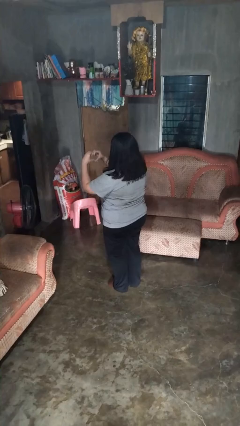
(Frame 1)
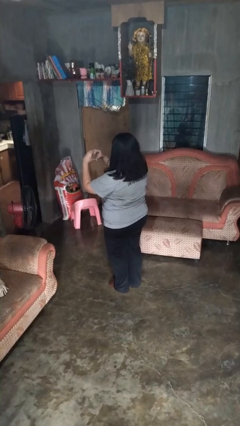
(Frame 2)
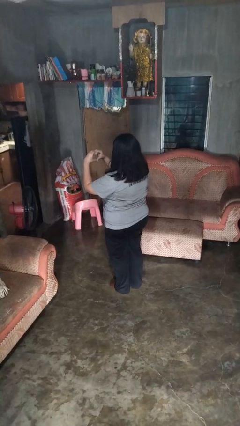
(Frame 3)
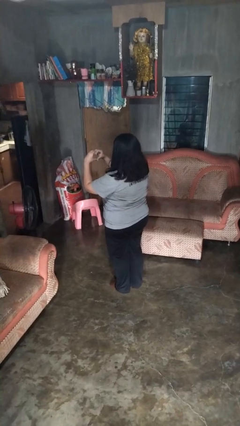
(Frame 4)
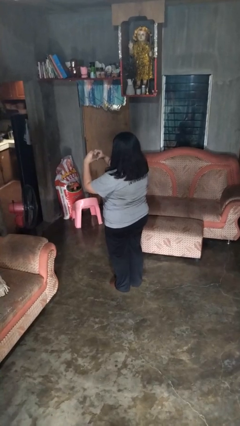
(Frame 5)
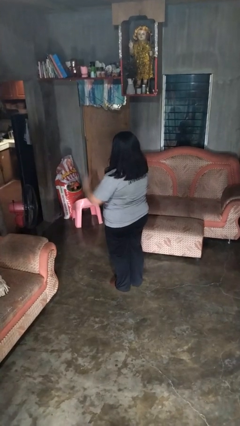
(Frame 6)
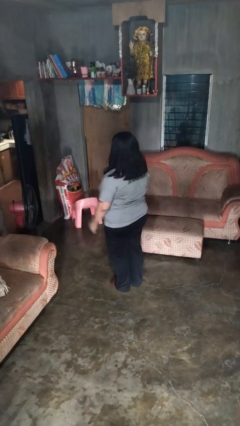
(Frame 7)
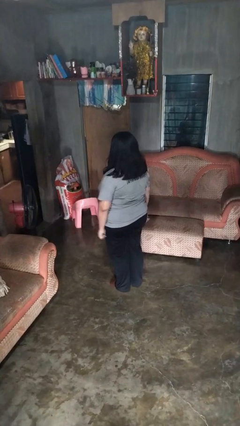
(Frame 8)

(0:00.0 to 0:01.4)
person gestures heart

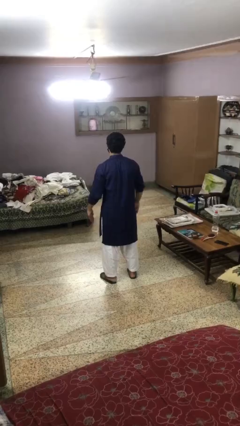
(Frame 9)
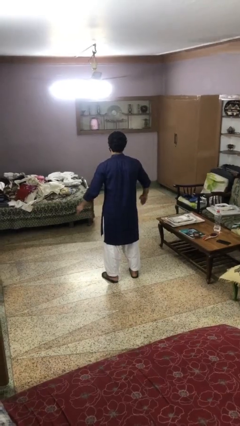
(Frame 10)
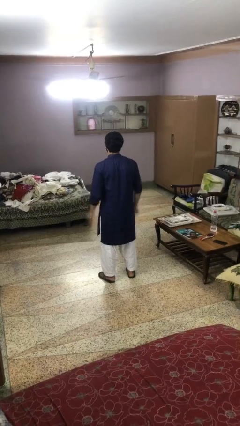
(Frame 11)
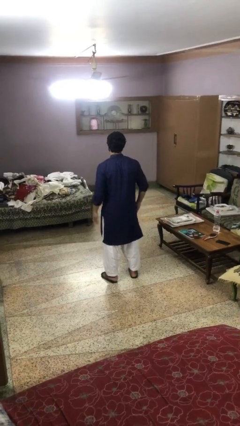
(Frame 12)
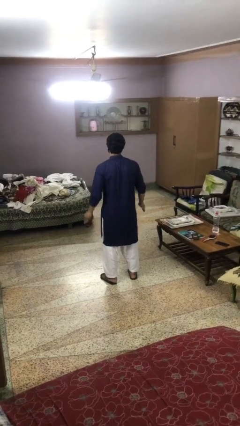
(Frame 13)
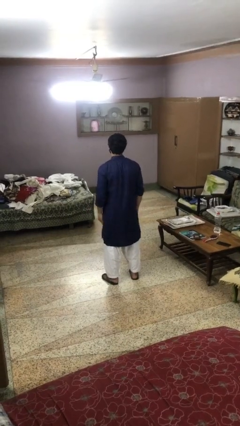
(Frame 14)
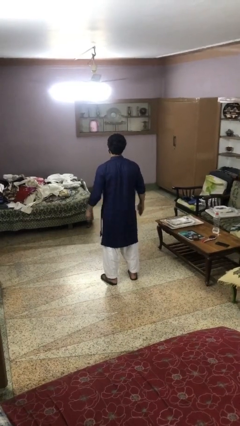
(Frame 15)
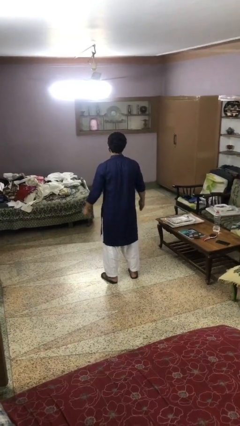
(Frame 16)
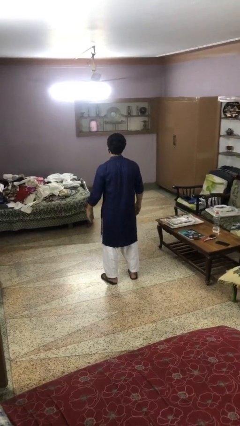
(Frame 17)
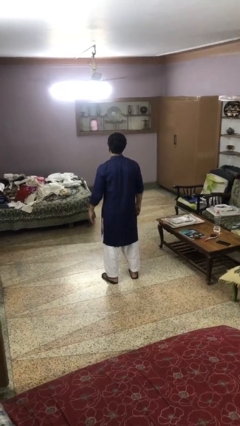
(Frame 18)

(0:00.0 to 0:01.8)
person slaps hands on thighs

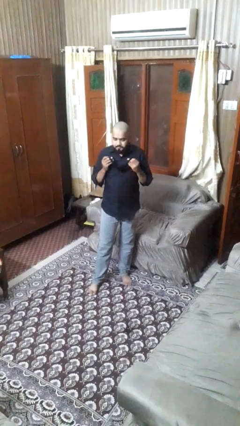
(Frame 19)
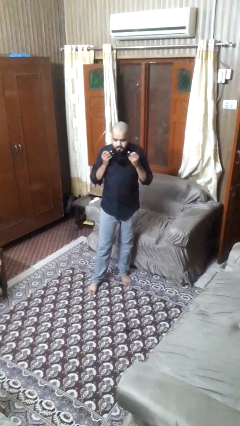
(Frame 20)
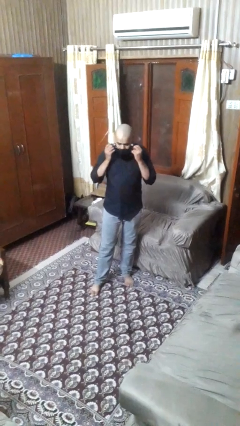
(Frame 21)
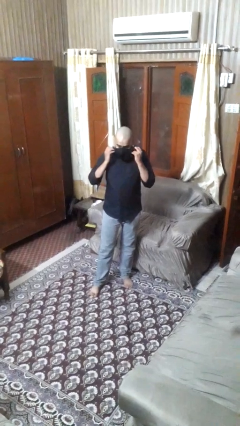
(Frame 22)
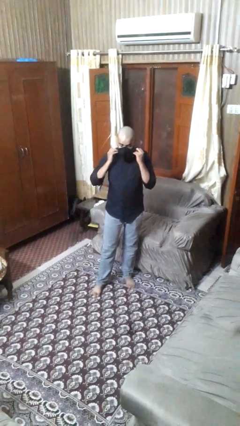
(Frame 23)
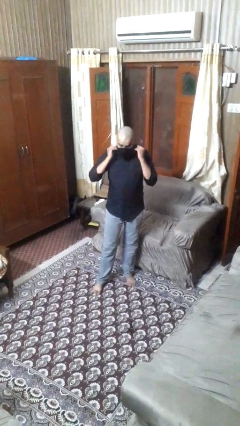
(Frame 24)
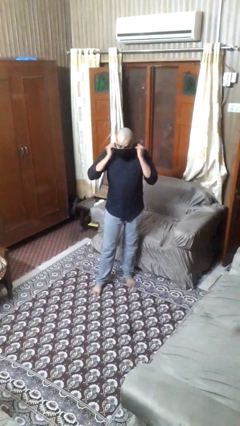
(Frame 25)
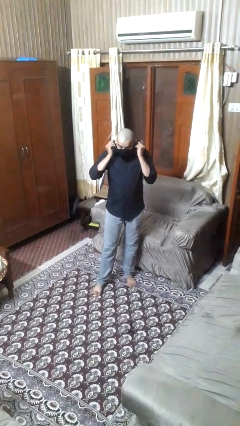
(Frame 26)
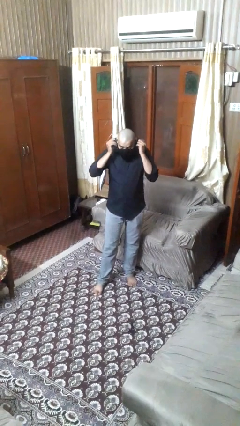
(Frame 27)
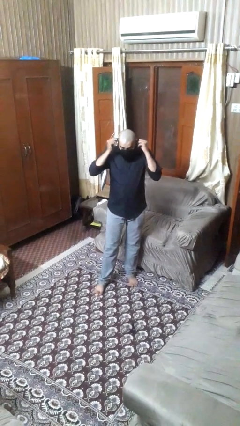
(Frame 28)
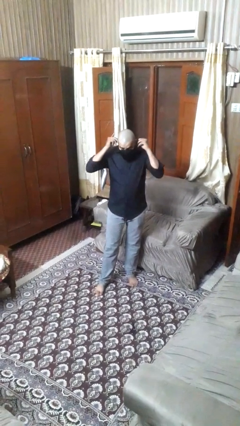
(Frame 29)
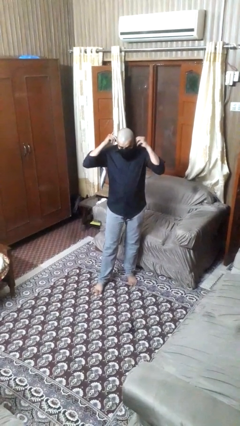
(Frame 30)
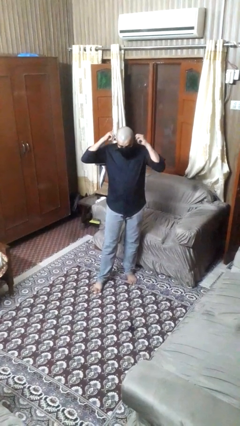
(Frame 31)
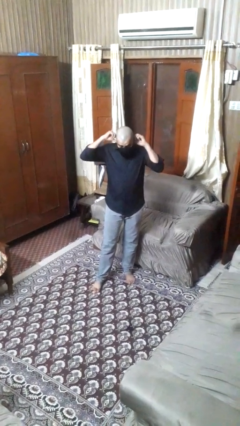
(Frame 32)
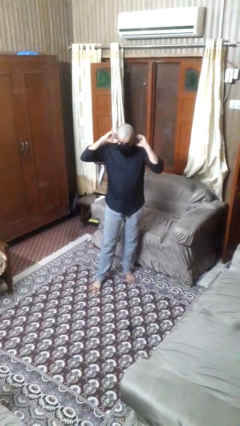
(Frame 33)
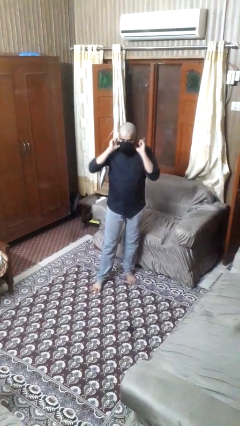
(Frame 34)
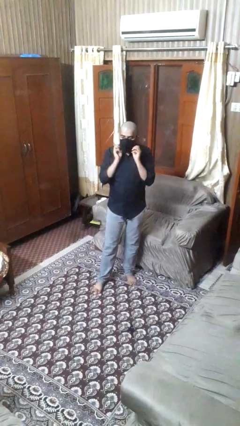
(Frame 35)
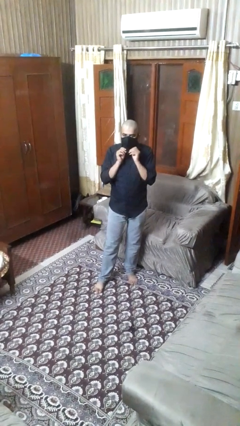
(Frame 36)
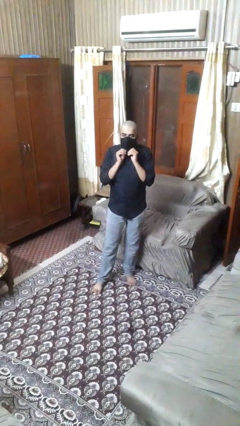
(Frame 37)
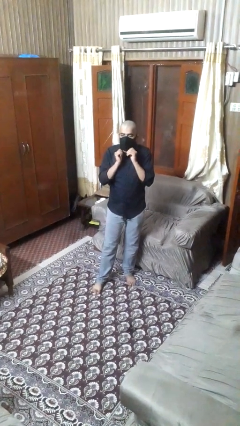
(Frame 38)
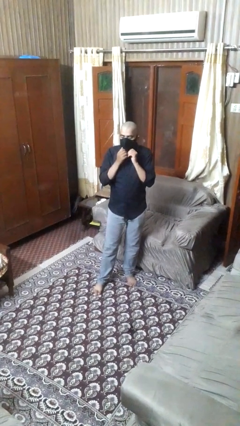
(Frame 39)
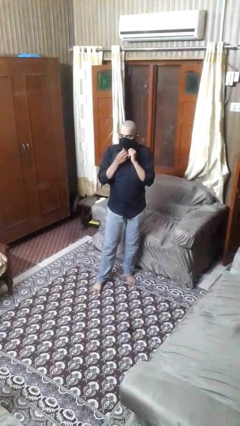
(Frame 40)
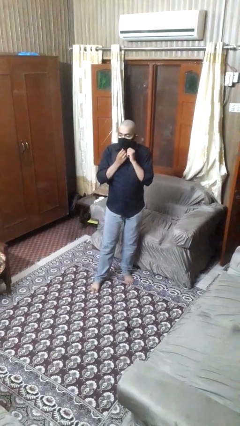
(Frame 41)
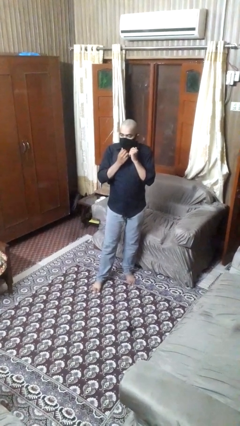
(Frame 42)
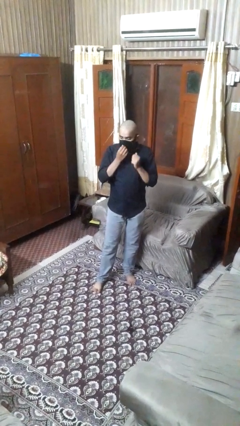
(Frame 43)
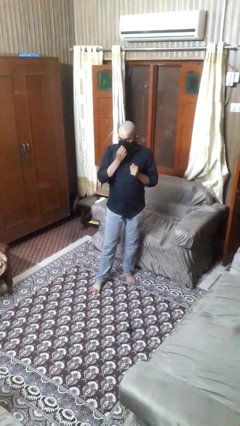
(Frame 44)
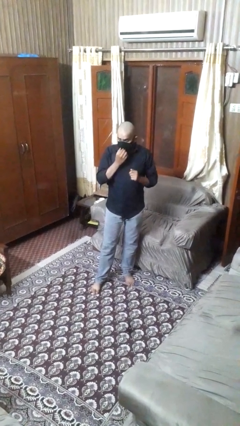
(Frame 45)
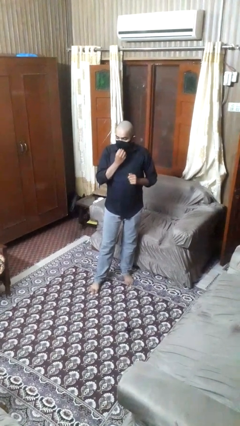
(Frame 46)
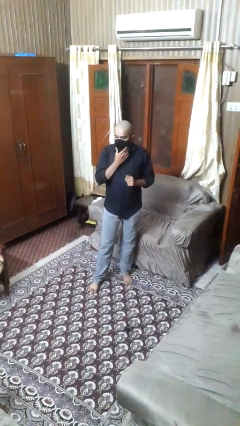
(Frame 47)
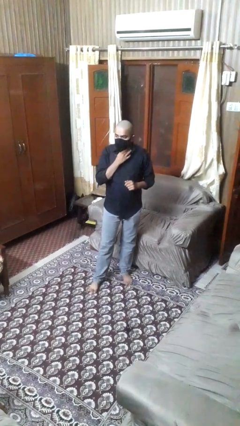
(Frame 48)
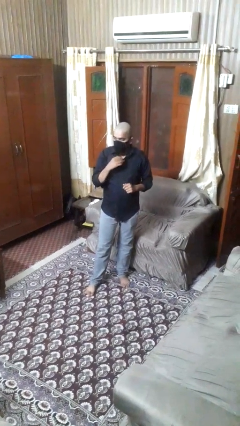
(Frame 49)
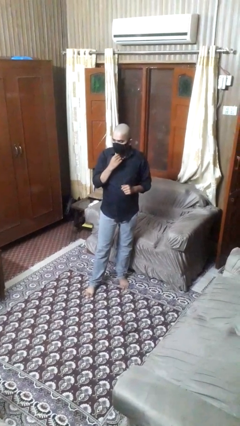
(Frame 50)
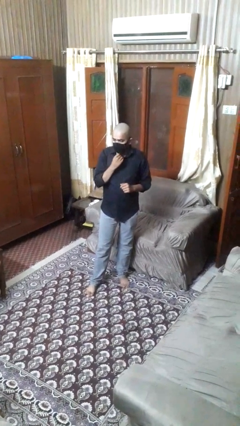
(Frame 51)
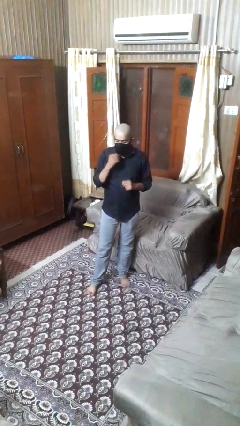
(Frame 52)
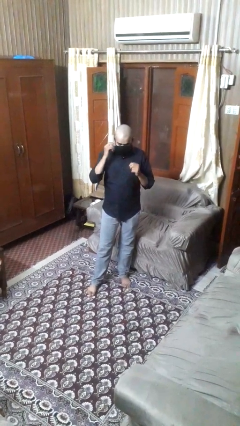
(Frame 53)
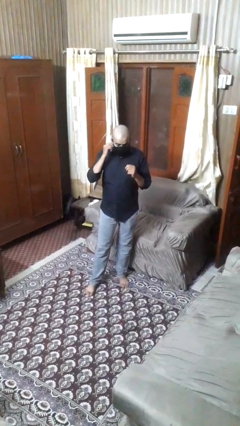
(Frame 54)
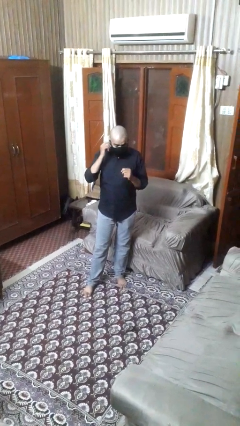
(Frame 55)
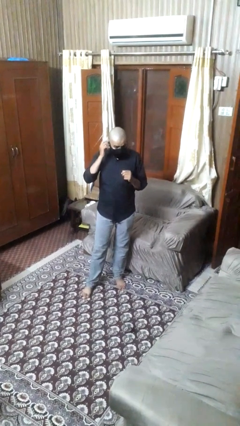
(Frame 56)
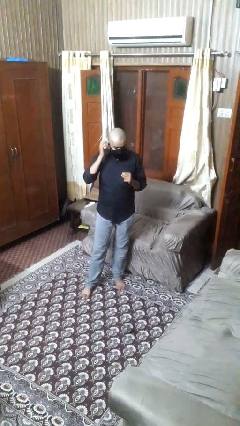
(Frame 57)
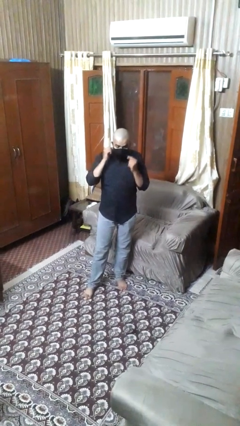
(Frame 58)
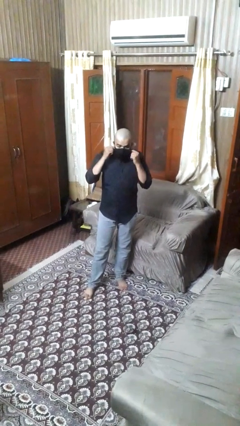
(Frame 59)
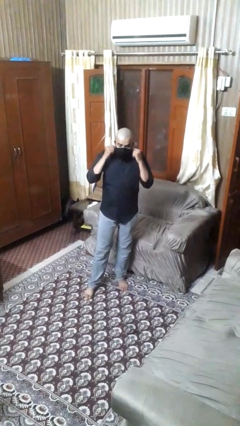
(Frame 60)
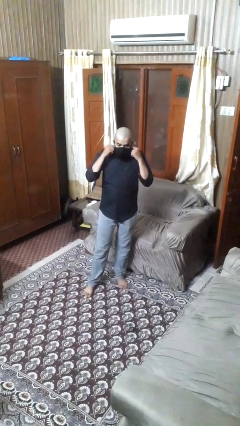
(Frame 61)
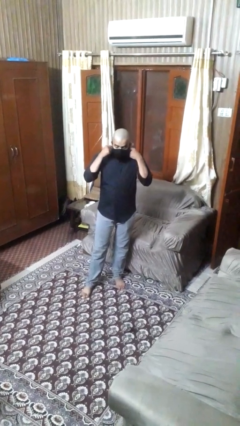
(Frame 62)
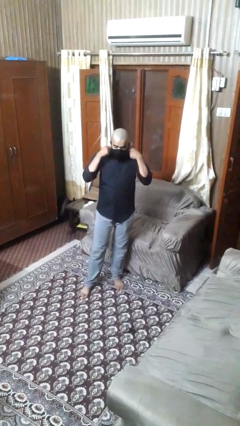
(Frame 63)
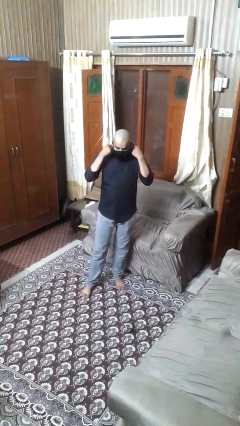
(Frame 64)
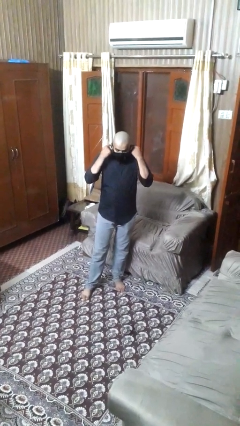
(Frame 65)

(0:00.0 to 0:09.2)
person puts on facemask

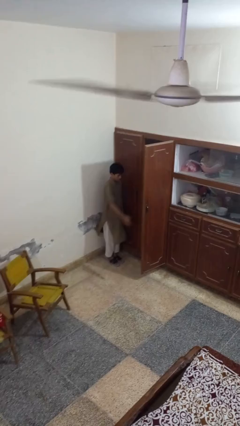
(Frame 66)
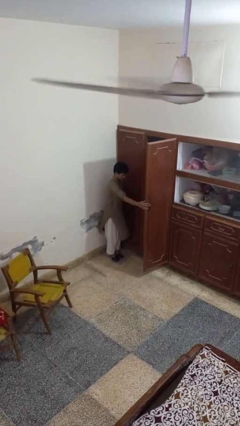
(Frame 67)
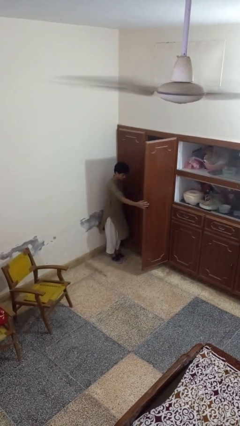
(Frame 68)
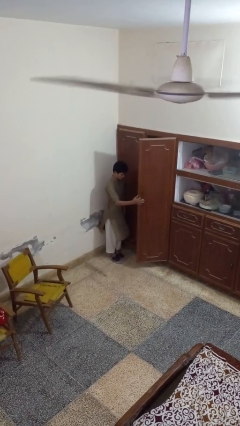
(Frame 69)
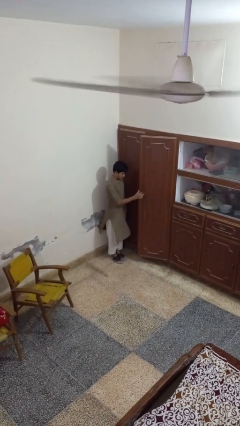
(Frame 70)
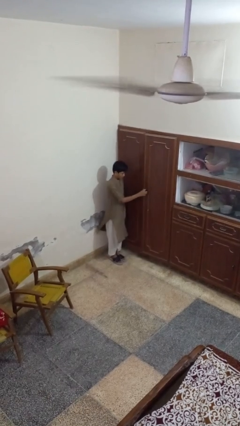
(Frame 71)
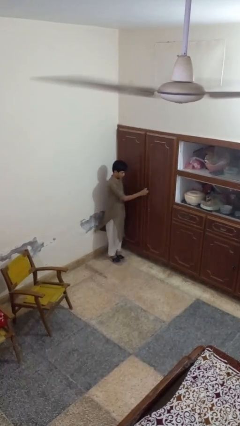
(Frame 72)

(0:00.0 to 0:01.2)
person closes closet door

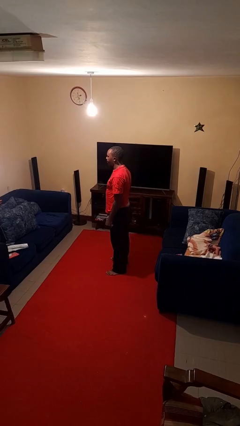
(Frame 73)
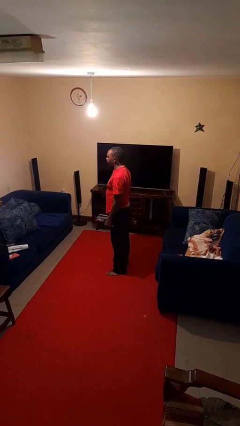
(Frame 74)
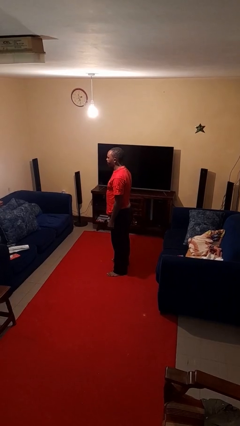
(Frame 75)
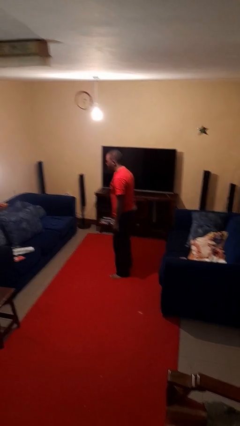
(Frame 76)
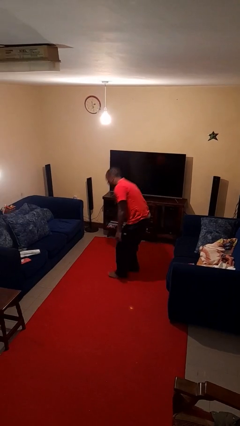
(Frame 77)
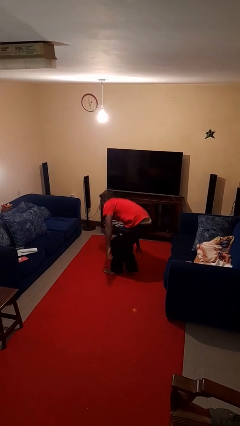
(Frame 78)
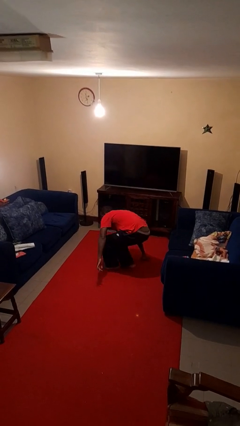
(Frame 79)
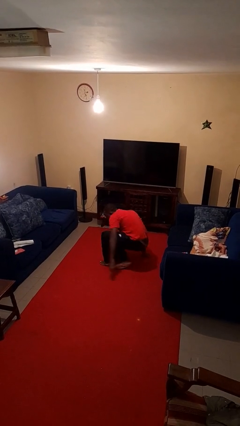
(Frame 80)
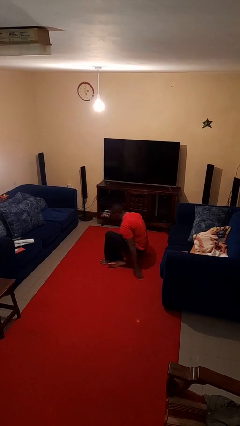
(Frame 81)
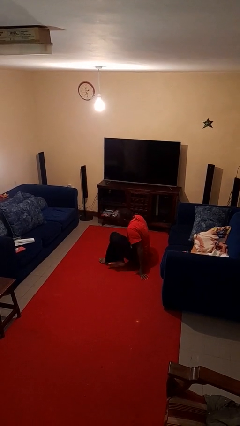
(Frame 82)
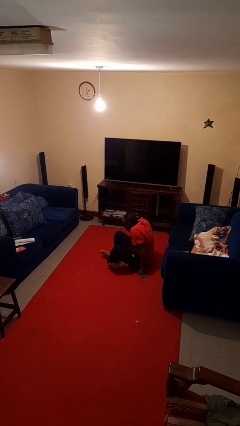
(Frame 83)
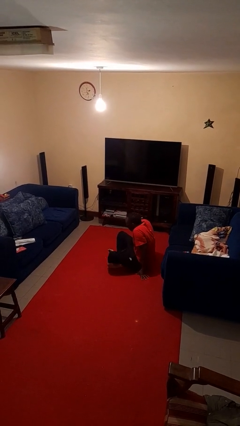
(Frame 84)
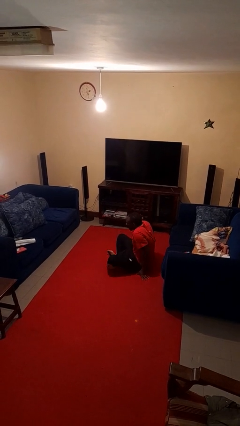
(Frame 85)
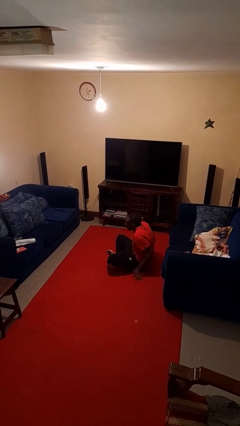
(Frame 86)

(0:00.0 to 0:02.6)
person sits crisscross

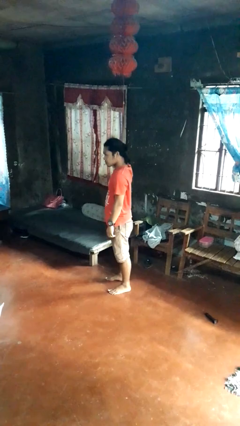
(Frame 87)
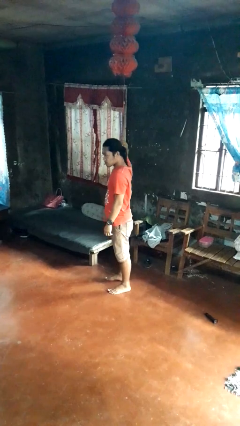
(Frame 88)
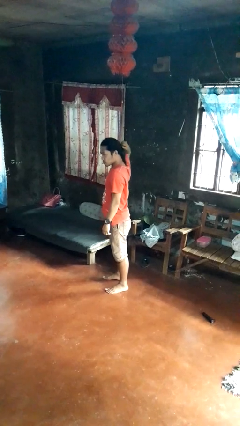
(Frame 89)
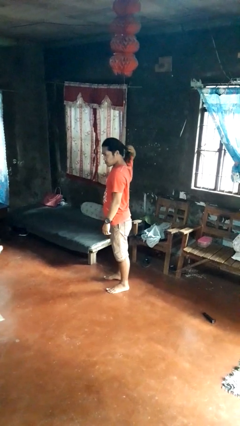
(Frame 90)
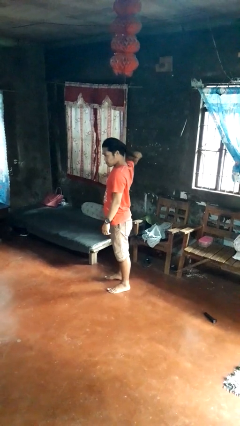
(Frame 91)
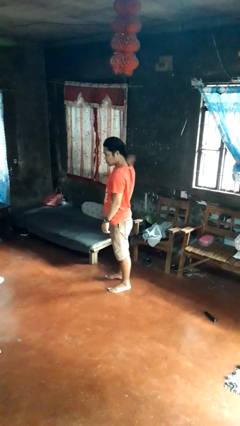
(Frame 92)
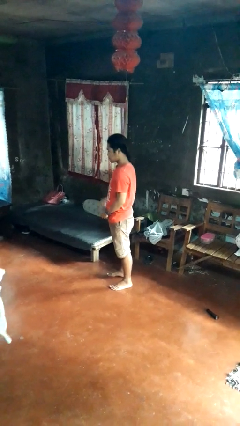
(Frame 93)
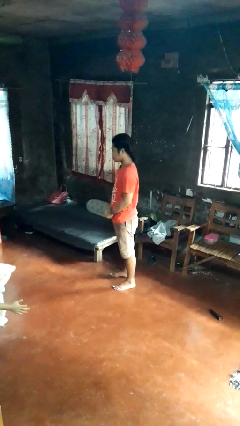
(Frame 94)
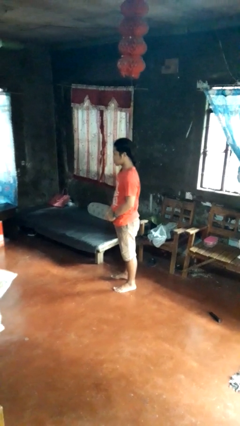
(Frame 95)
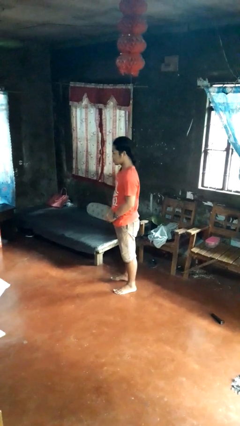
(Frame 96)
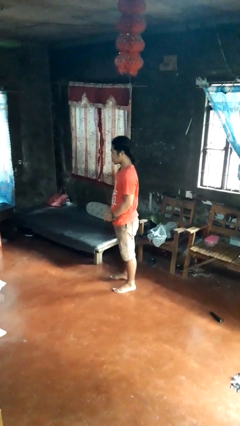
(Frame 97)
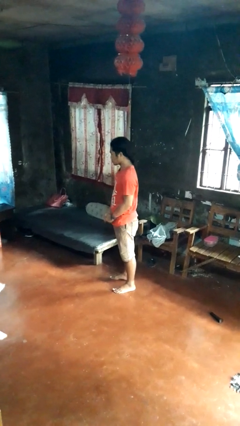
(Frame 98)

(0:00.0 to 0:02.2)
person takes off hairtie
